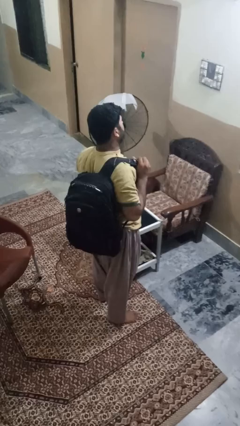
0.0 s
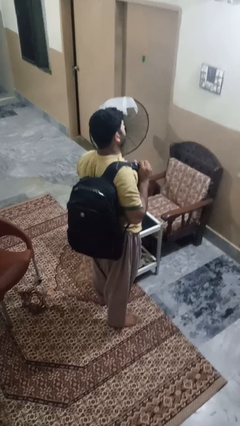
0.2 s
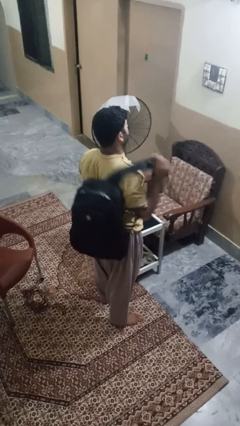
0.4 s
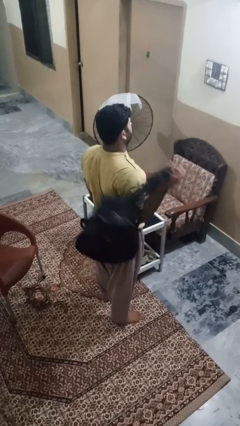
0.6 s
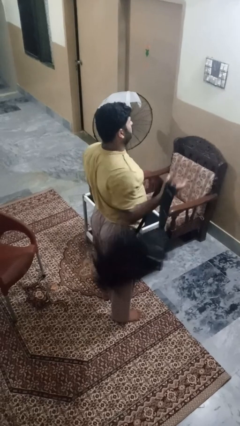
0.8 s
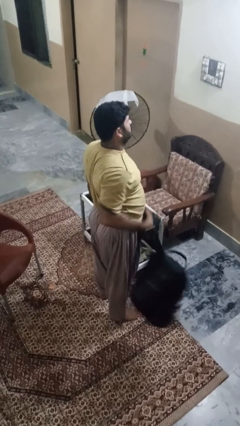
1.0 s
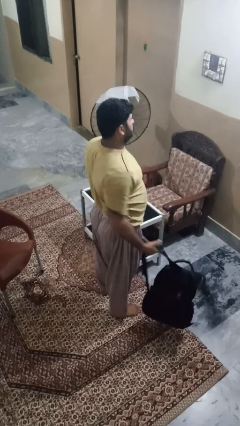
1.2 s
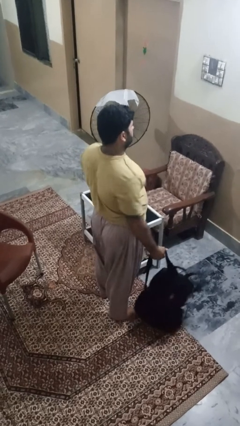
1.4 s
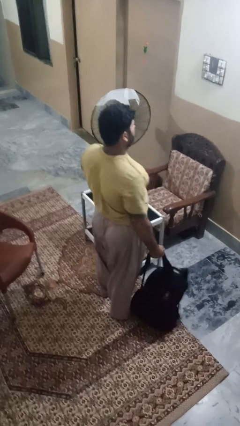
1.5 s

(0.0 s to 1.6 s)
person takes off backpack

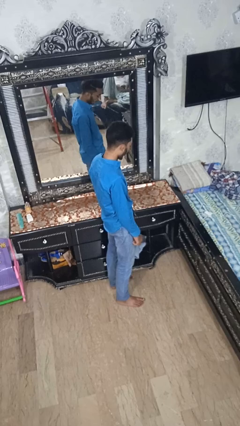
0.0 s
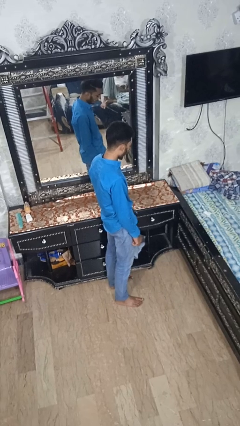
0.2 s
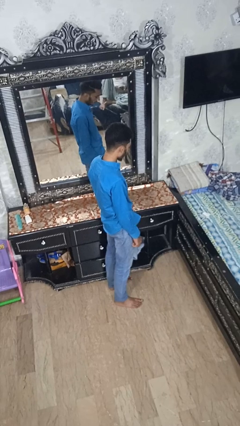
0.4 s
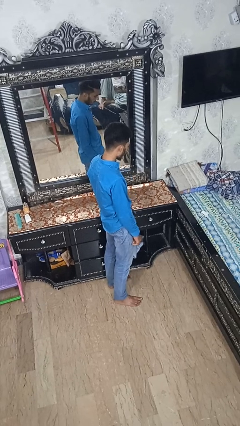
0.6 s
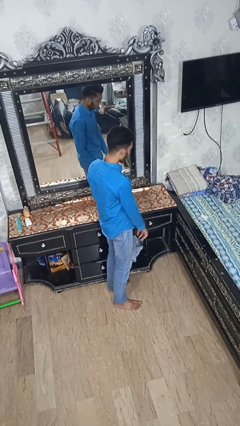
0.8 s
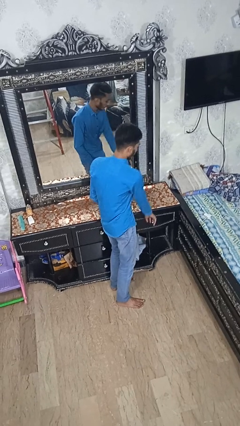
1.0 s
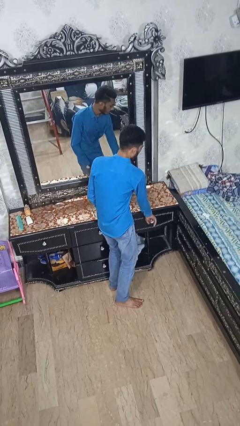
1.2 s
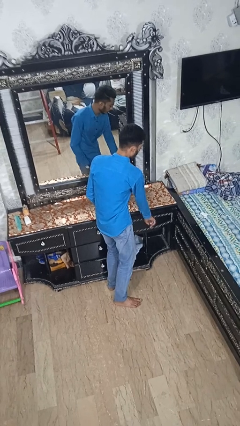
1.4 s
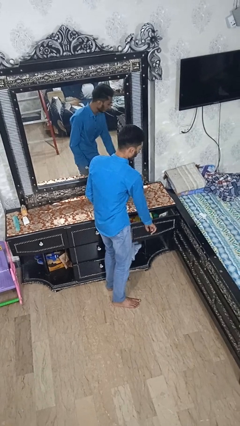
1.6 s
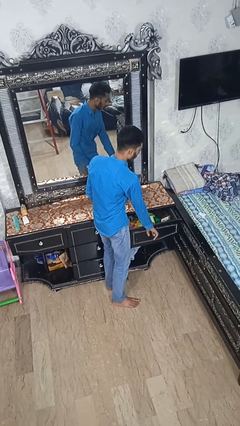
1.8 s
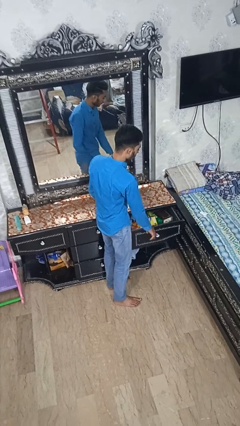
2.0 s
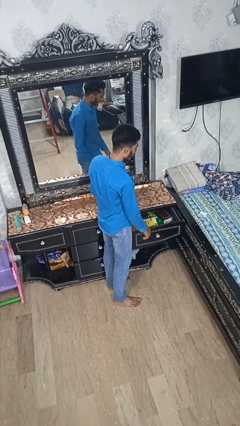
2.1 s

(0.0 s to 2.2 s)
person opens dresser drawer

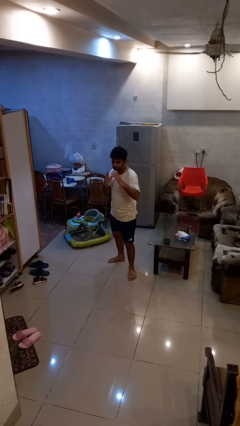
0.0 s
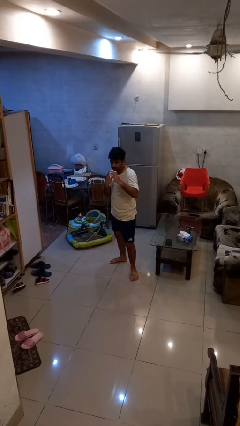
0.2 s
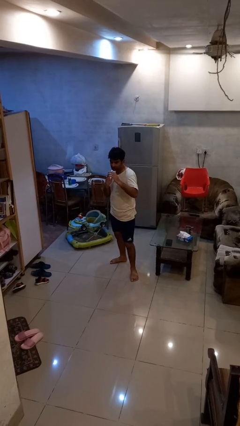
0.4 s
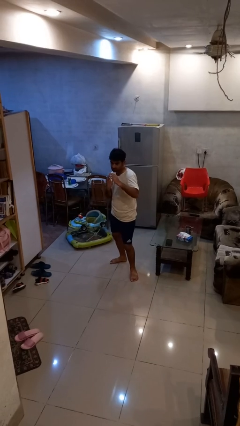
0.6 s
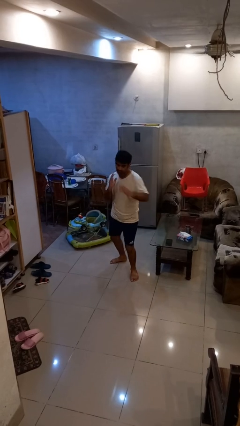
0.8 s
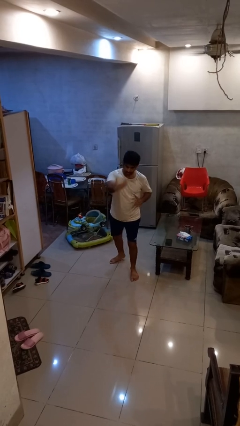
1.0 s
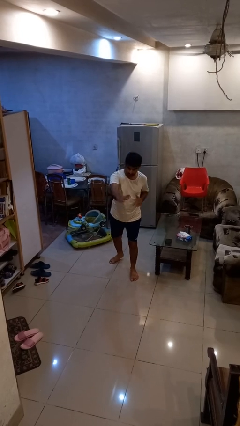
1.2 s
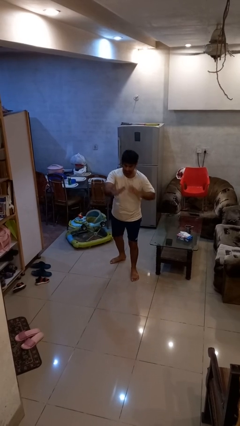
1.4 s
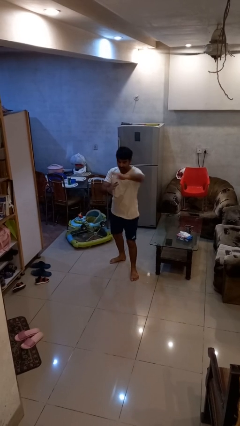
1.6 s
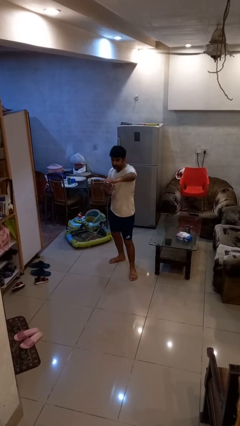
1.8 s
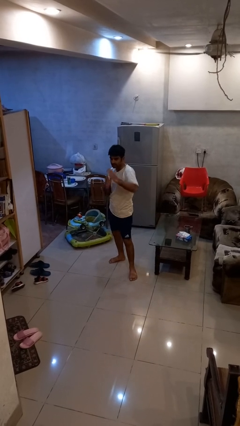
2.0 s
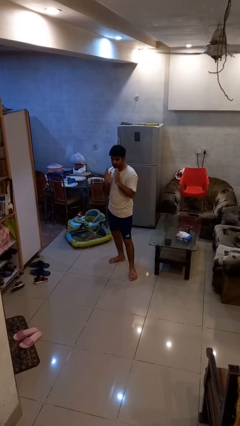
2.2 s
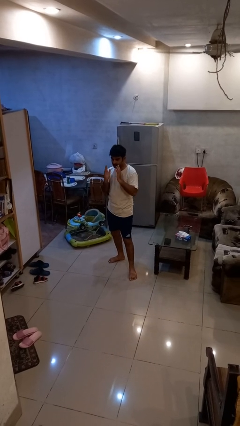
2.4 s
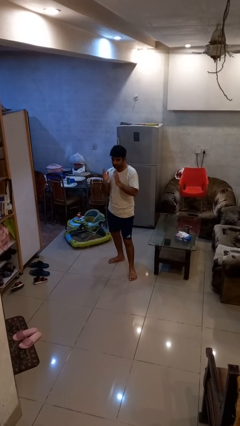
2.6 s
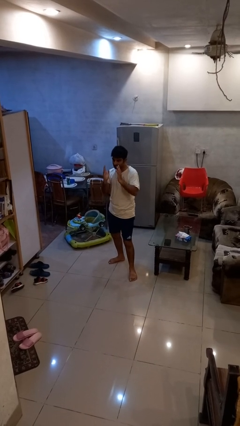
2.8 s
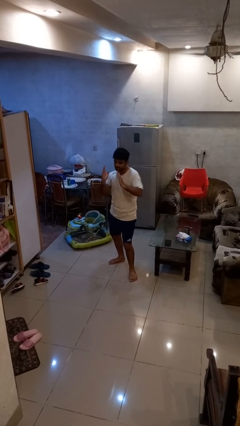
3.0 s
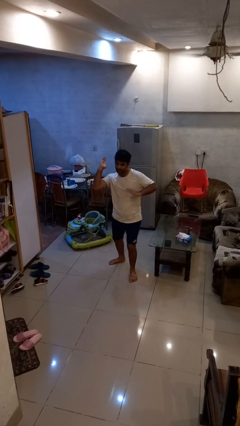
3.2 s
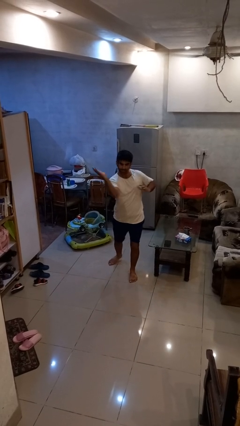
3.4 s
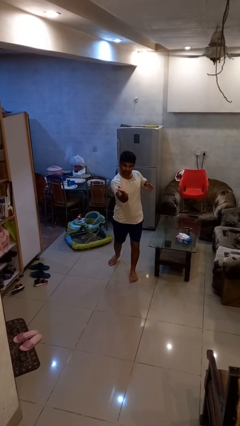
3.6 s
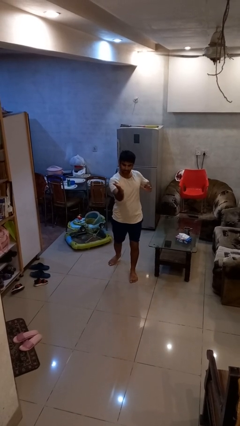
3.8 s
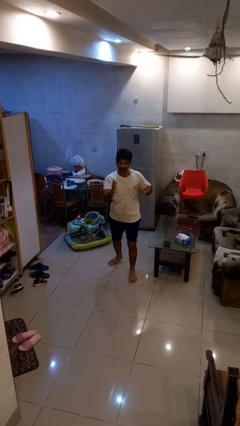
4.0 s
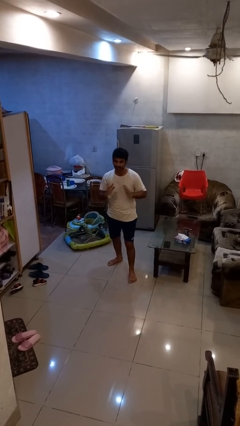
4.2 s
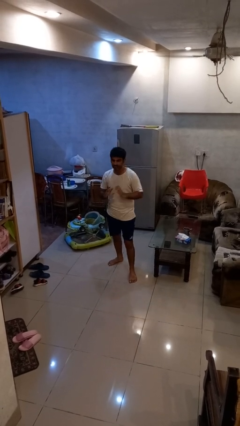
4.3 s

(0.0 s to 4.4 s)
person karate chop

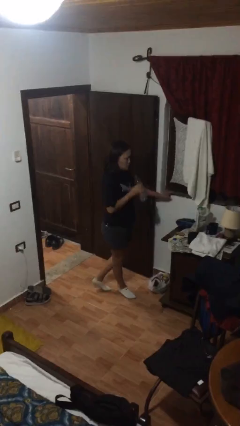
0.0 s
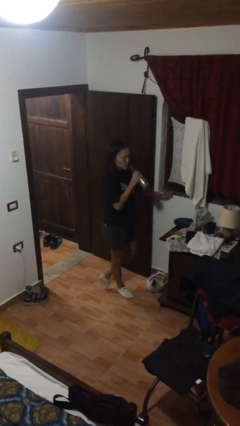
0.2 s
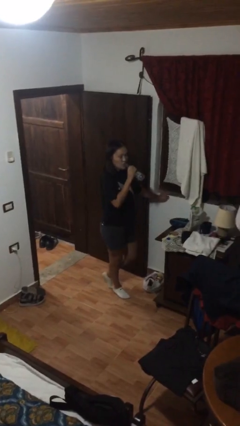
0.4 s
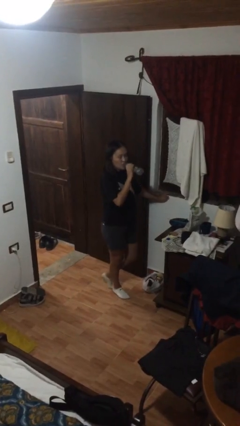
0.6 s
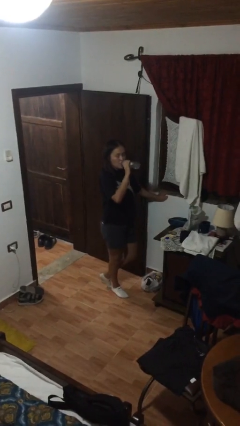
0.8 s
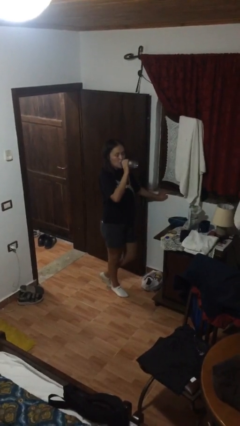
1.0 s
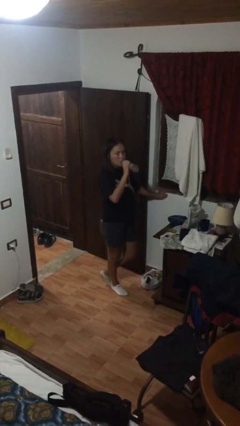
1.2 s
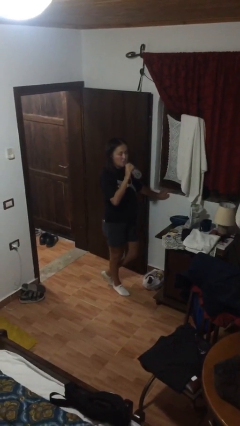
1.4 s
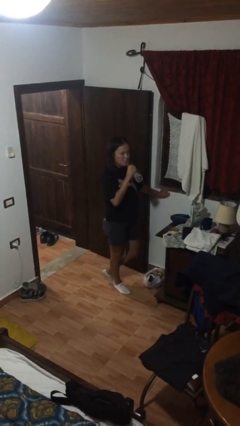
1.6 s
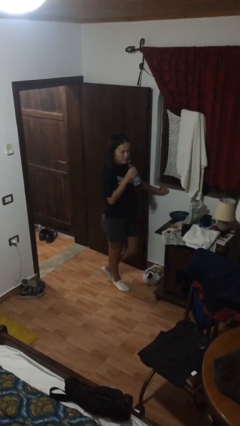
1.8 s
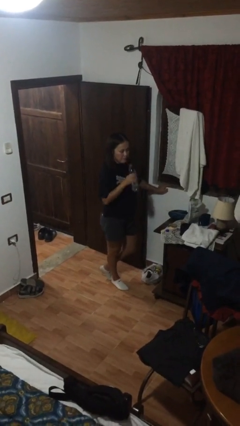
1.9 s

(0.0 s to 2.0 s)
person drinks from bottle

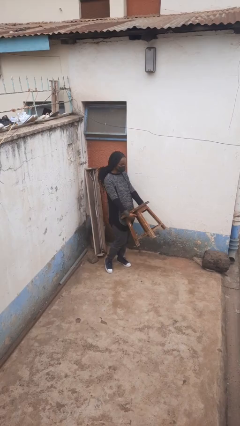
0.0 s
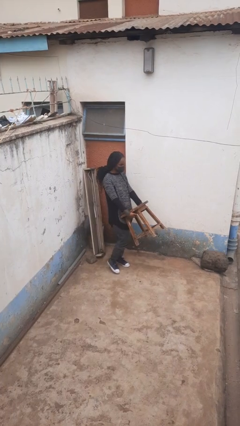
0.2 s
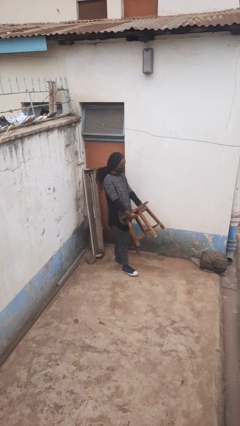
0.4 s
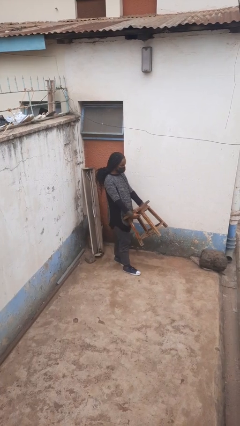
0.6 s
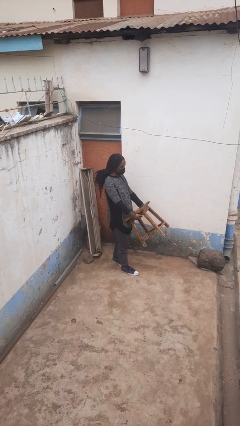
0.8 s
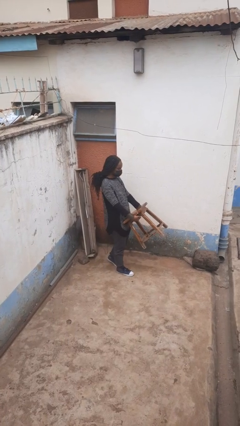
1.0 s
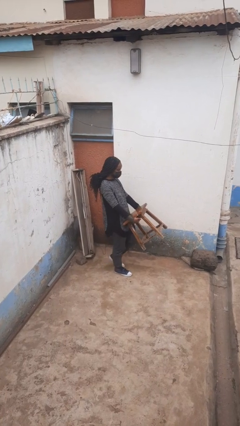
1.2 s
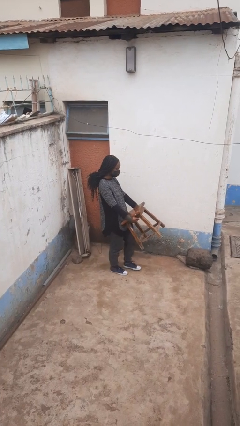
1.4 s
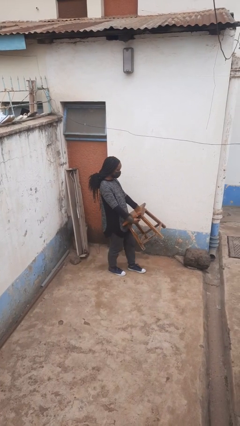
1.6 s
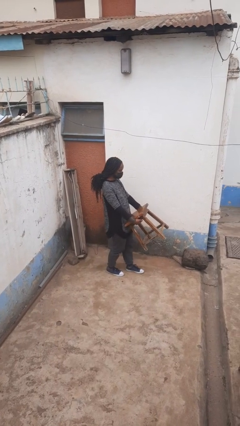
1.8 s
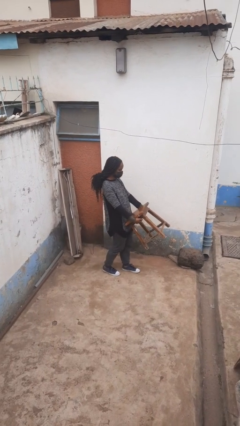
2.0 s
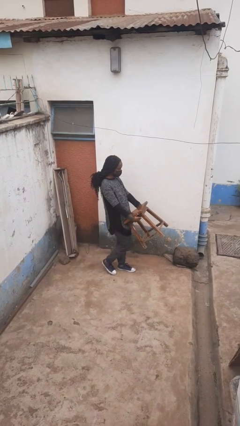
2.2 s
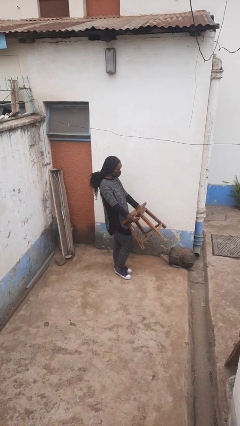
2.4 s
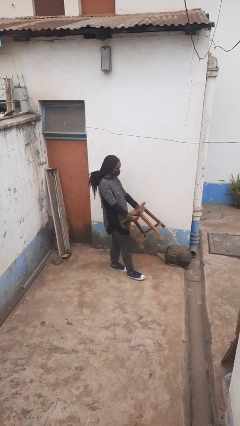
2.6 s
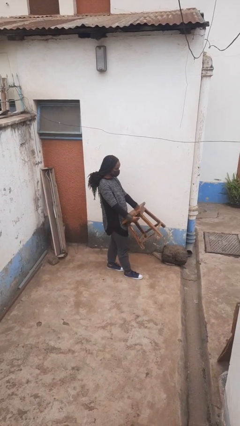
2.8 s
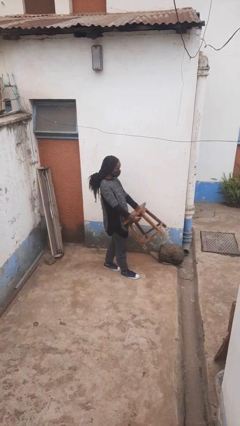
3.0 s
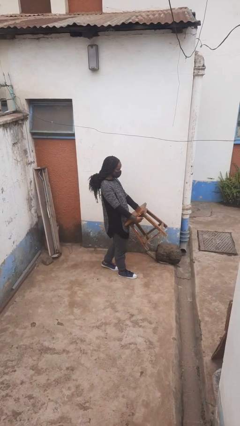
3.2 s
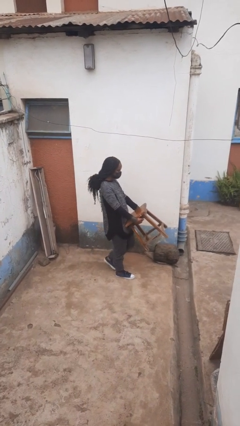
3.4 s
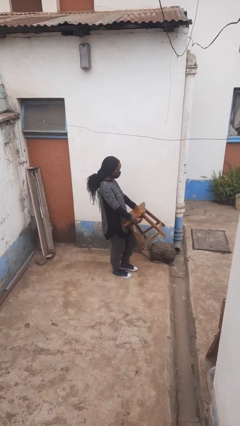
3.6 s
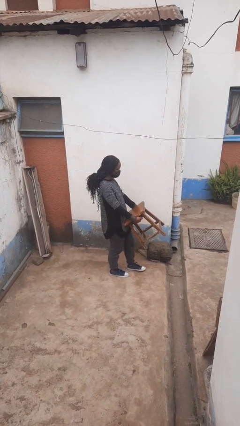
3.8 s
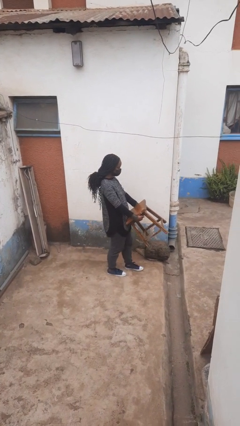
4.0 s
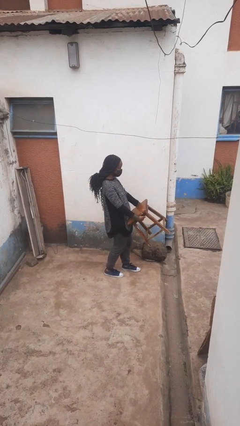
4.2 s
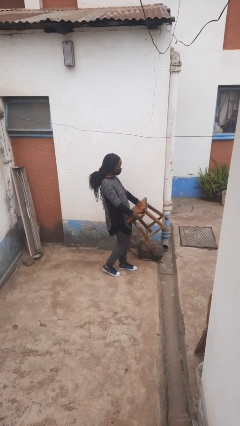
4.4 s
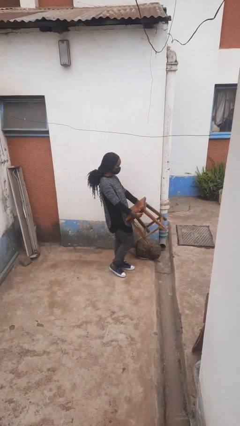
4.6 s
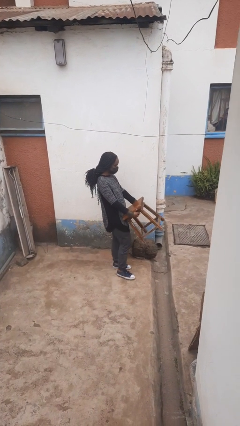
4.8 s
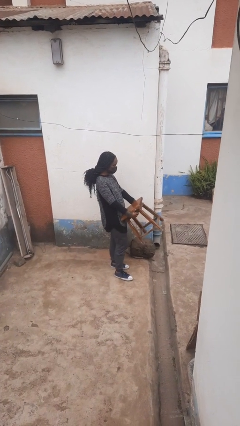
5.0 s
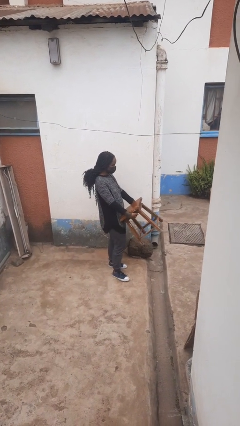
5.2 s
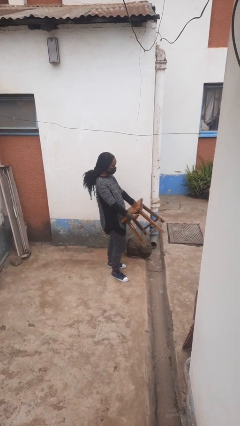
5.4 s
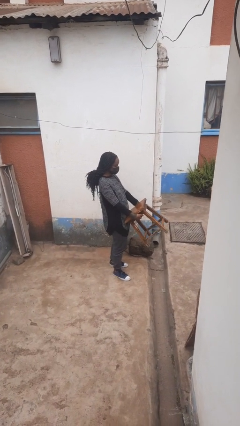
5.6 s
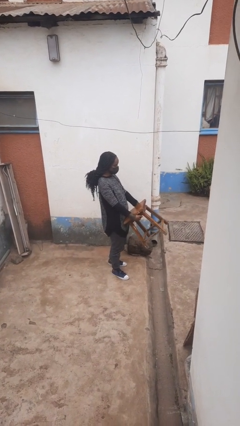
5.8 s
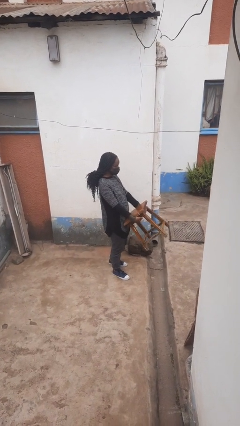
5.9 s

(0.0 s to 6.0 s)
person carries furniture

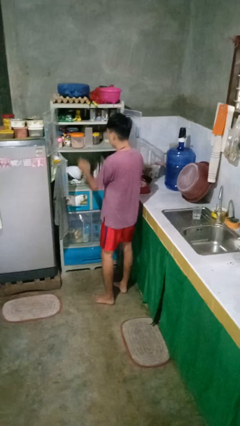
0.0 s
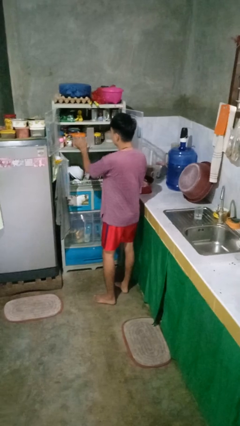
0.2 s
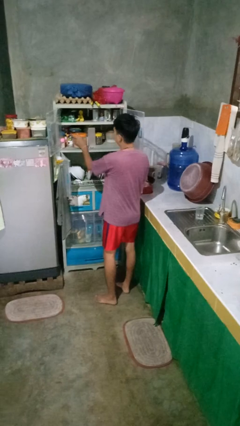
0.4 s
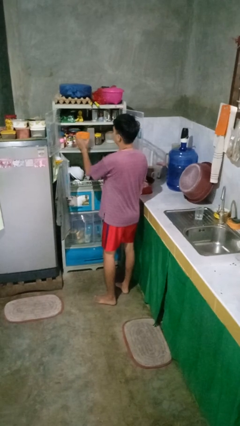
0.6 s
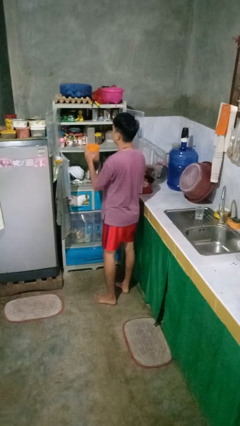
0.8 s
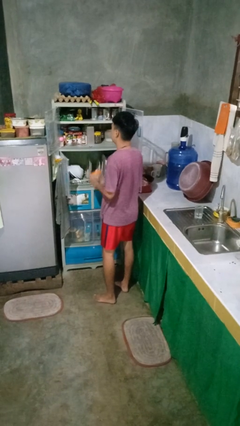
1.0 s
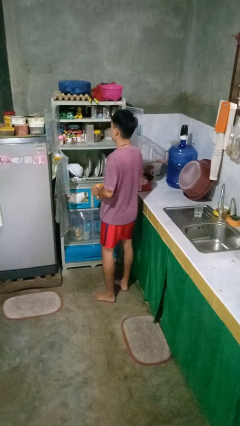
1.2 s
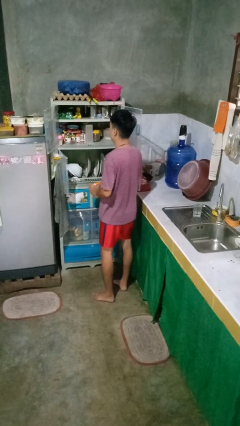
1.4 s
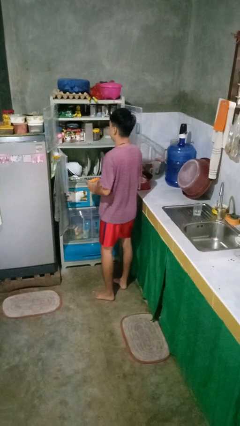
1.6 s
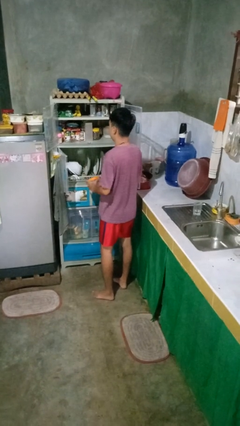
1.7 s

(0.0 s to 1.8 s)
person takes object from cabinet
